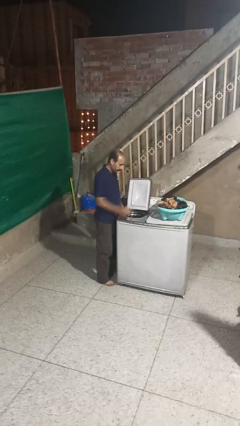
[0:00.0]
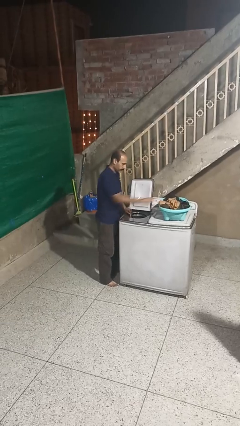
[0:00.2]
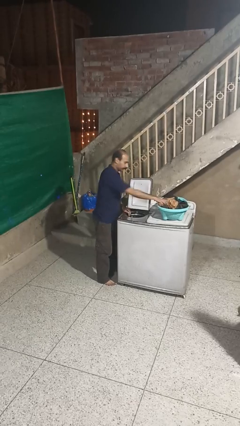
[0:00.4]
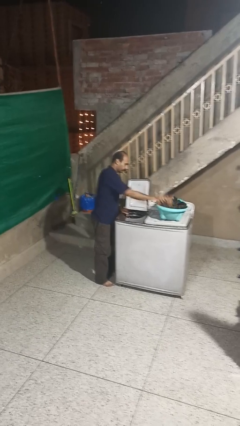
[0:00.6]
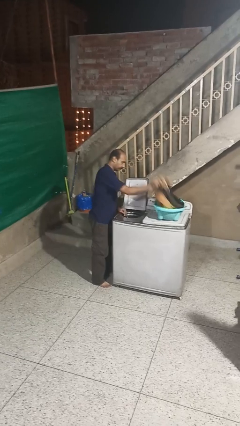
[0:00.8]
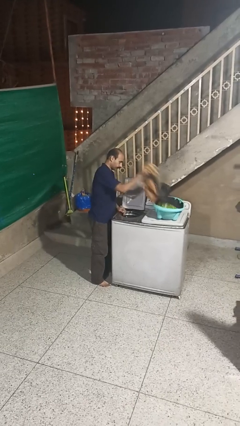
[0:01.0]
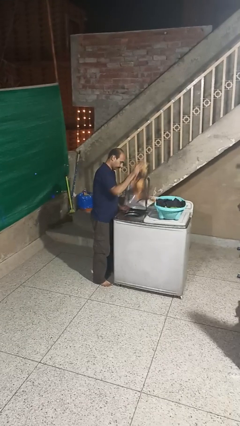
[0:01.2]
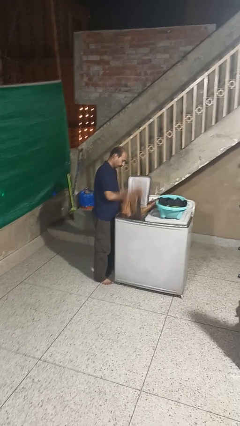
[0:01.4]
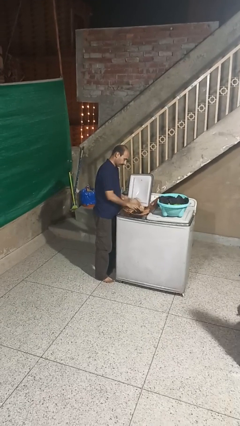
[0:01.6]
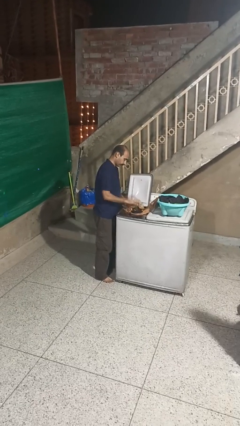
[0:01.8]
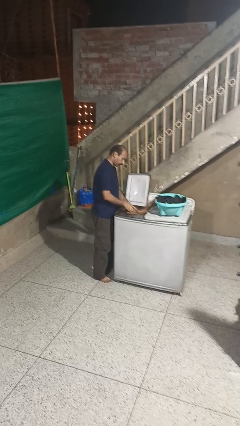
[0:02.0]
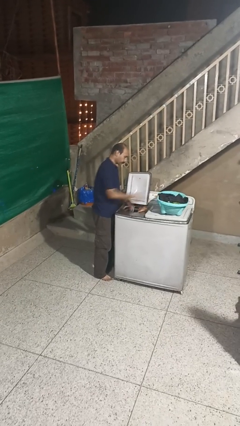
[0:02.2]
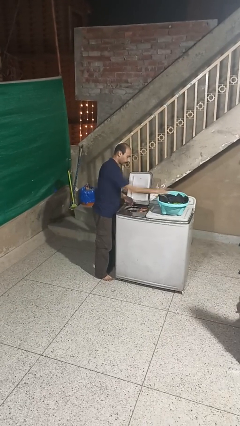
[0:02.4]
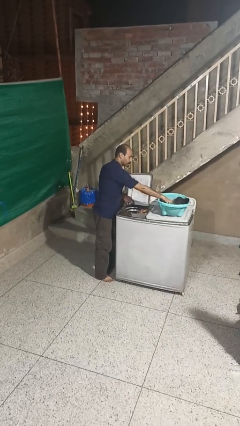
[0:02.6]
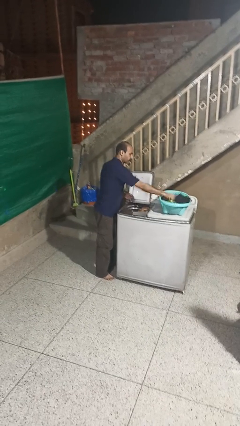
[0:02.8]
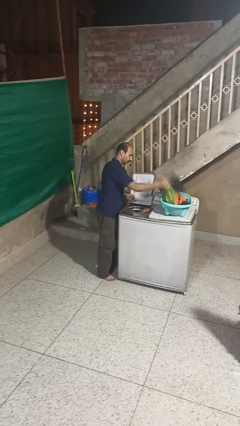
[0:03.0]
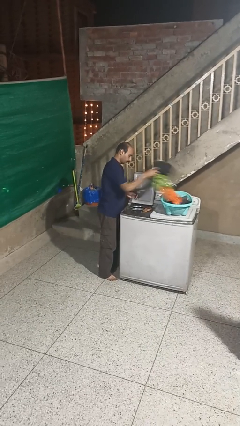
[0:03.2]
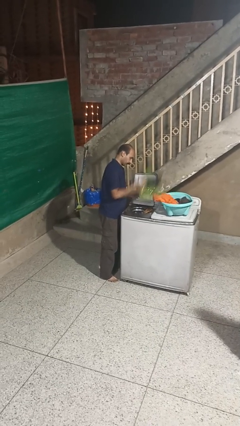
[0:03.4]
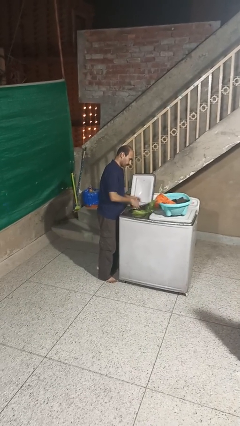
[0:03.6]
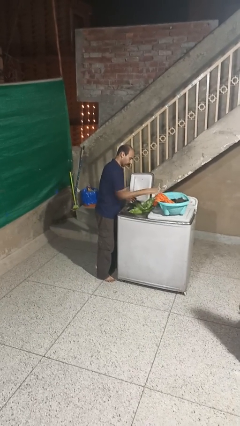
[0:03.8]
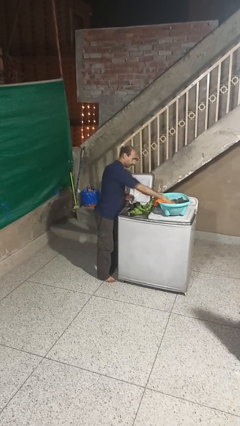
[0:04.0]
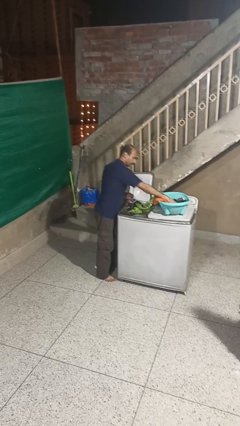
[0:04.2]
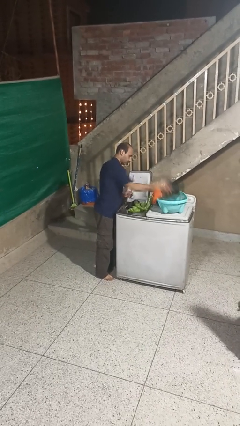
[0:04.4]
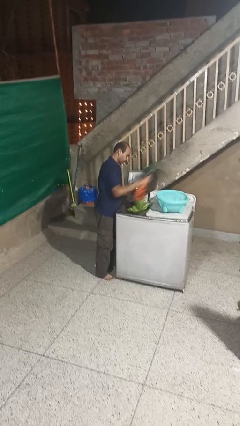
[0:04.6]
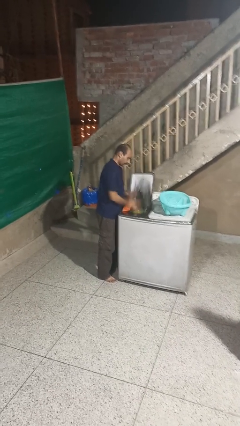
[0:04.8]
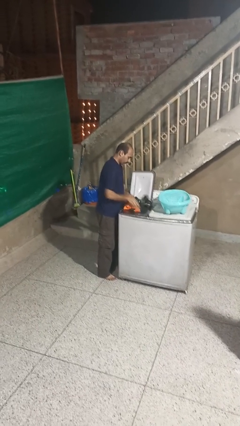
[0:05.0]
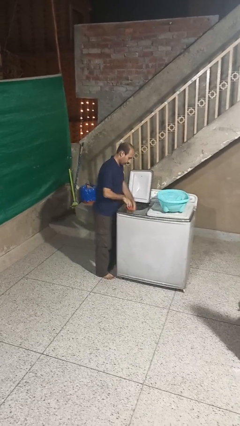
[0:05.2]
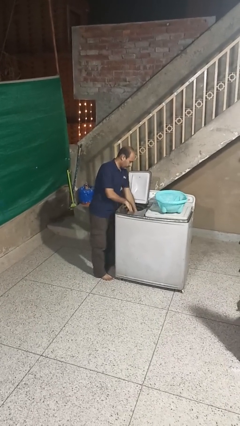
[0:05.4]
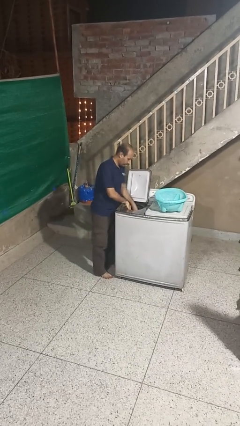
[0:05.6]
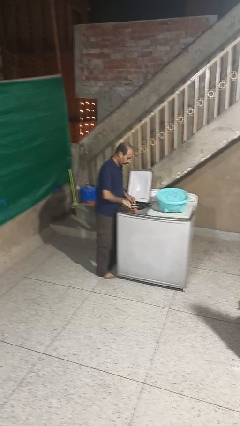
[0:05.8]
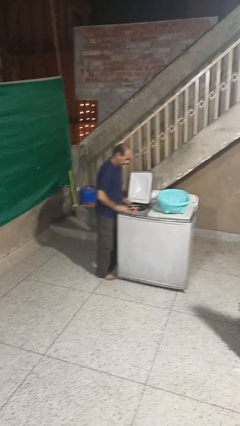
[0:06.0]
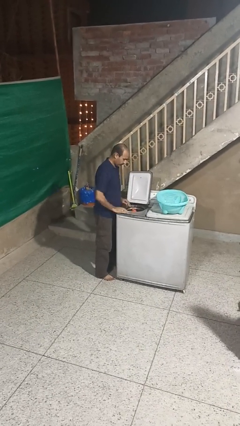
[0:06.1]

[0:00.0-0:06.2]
person loads dryer

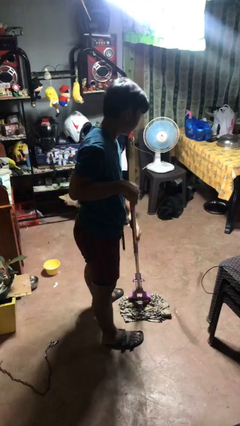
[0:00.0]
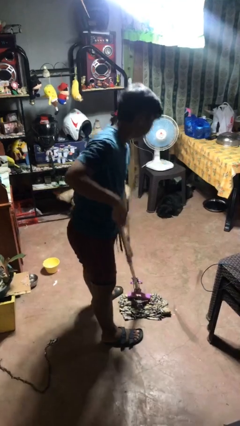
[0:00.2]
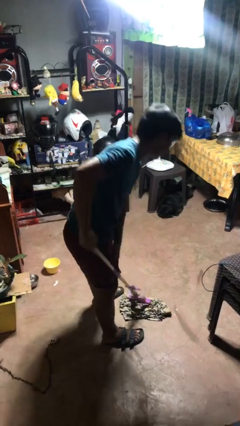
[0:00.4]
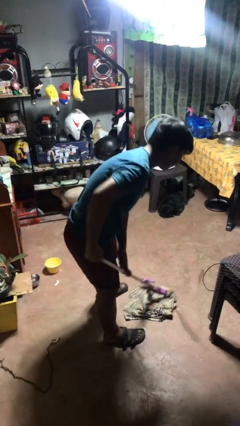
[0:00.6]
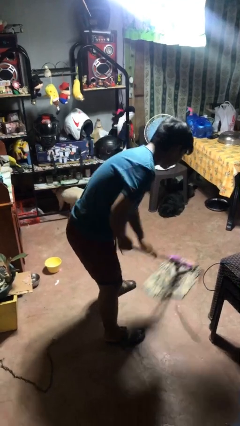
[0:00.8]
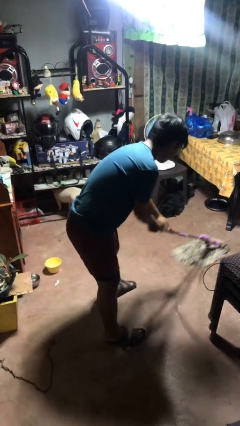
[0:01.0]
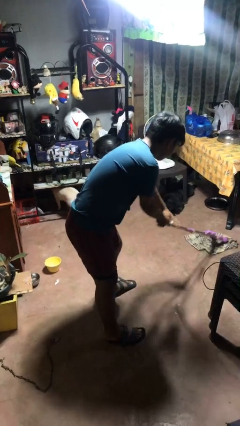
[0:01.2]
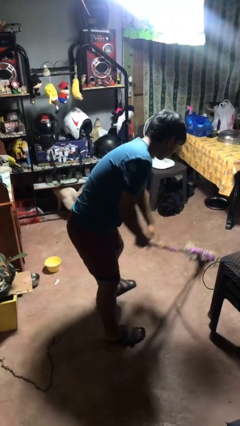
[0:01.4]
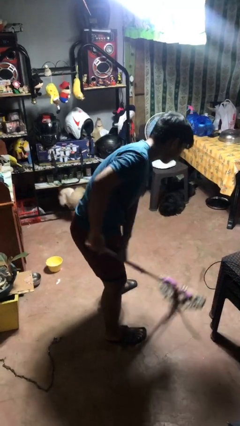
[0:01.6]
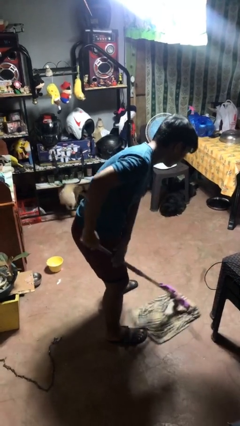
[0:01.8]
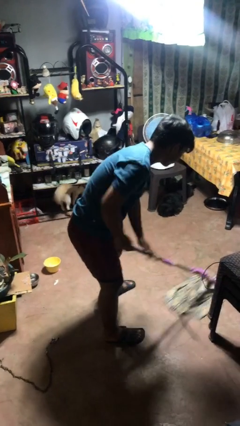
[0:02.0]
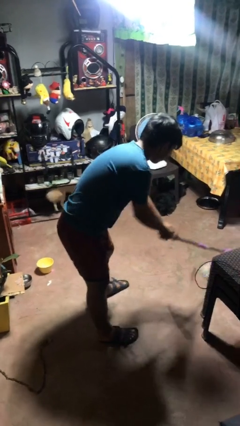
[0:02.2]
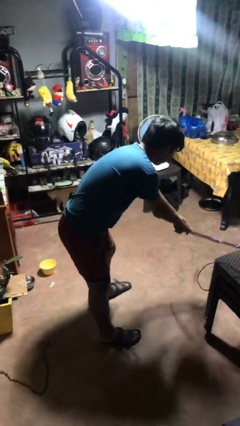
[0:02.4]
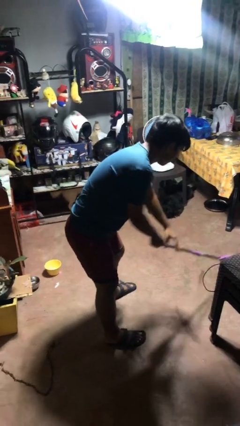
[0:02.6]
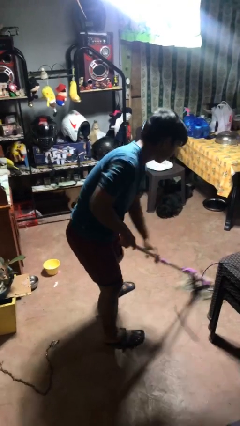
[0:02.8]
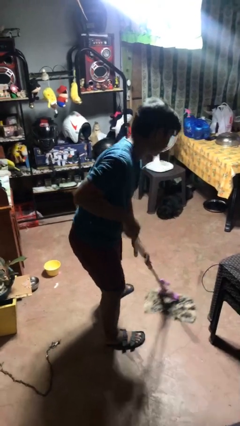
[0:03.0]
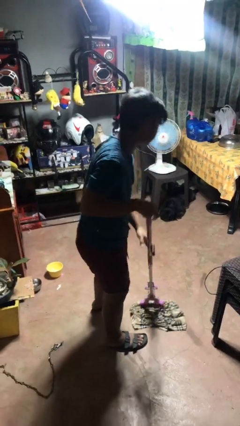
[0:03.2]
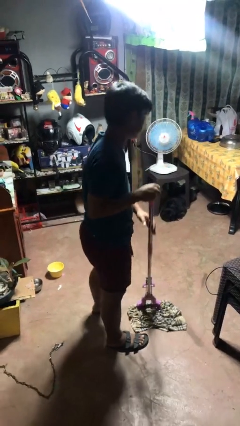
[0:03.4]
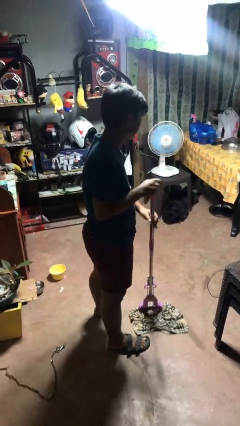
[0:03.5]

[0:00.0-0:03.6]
person mops

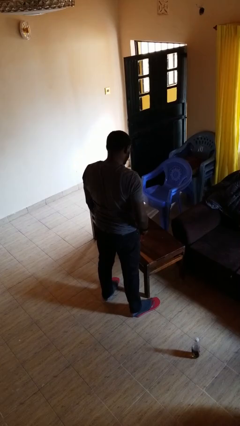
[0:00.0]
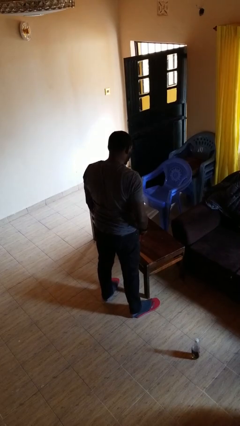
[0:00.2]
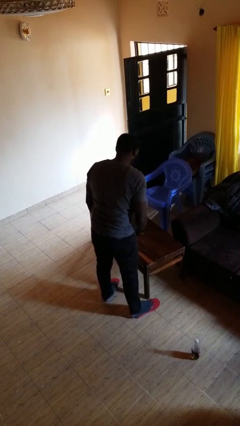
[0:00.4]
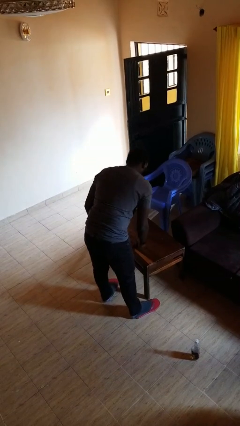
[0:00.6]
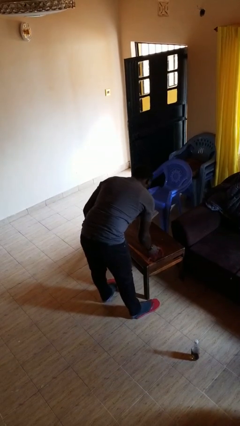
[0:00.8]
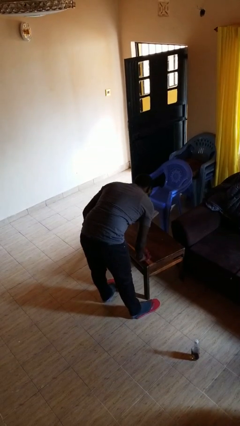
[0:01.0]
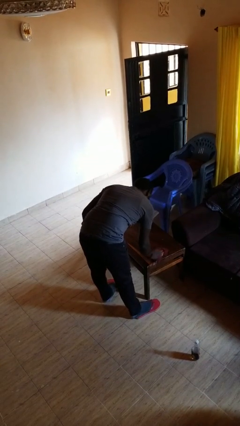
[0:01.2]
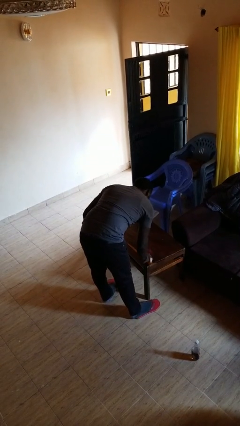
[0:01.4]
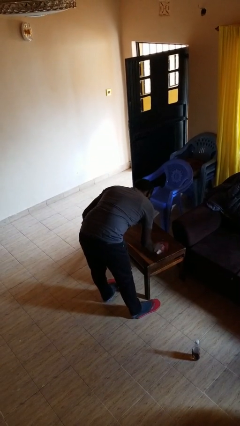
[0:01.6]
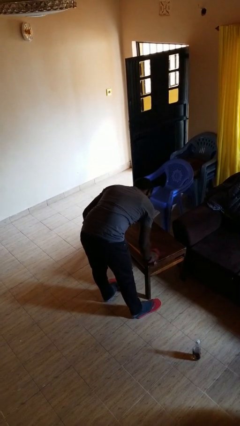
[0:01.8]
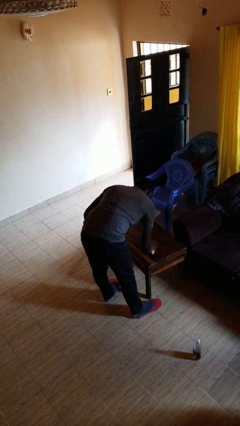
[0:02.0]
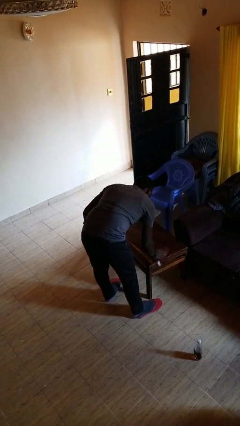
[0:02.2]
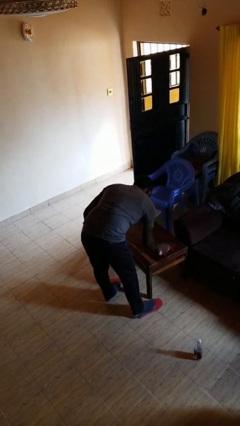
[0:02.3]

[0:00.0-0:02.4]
person cleans table with rag

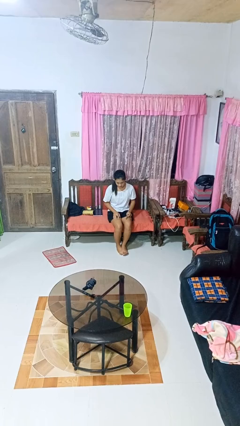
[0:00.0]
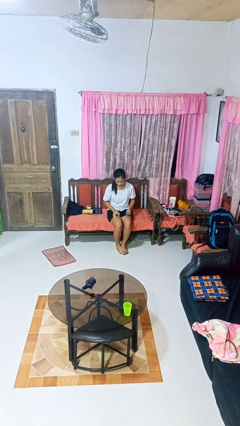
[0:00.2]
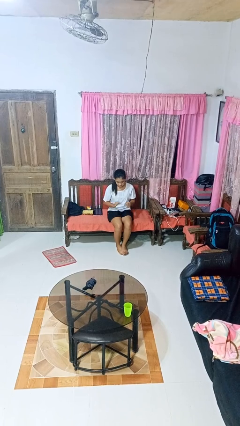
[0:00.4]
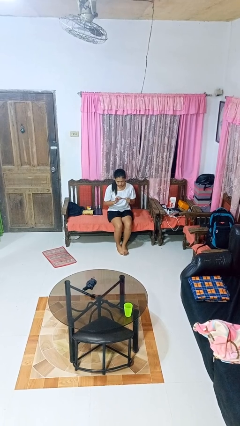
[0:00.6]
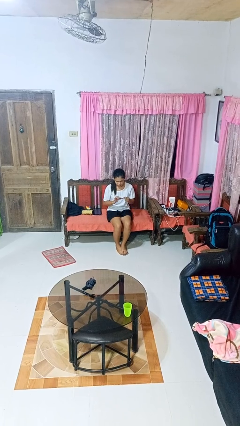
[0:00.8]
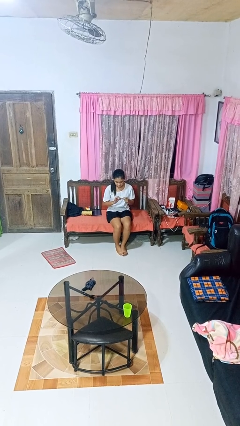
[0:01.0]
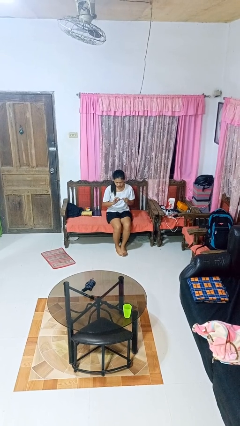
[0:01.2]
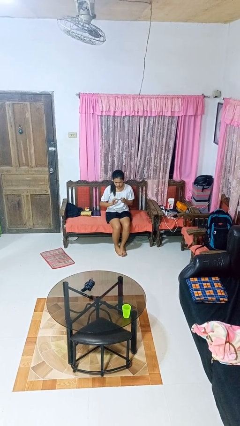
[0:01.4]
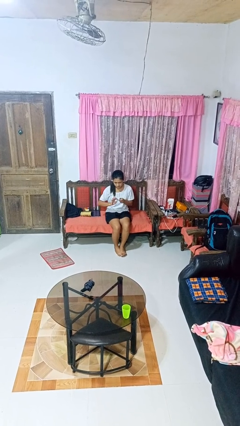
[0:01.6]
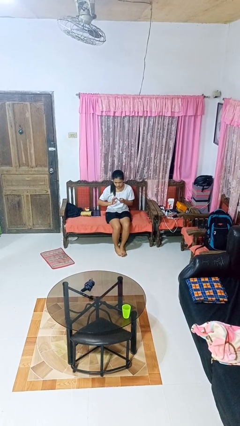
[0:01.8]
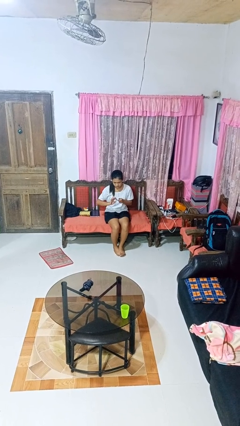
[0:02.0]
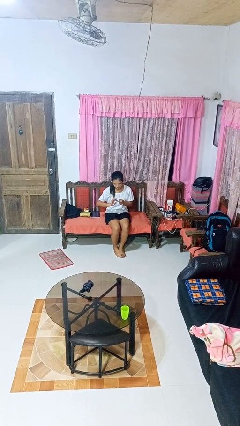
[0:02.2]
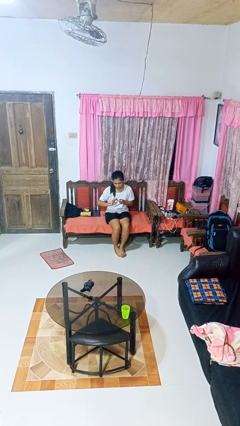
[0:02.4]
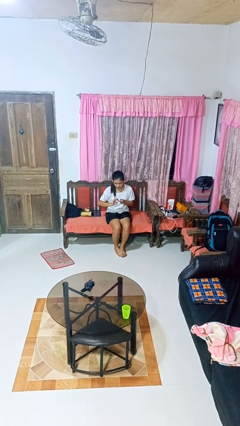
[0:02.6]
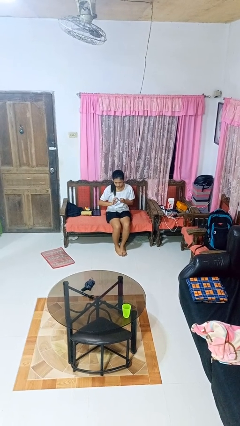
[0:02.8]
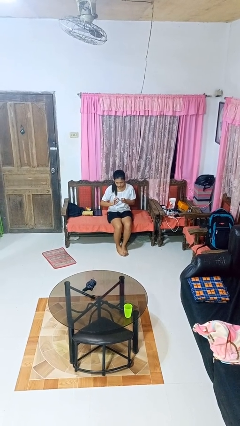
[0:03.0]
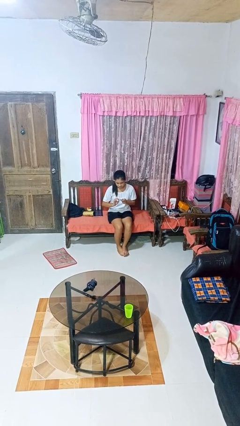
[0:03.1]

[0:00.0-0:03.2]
person files fingernails

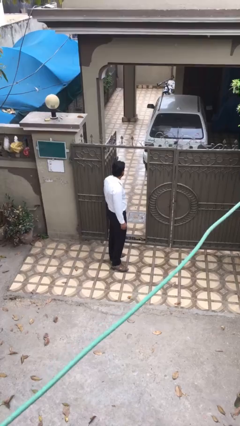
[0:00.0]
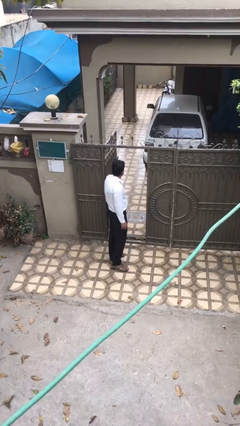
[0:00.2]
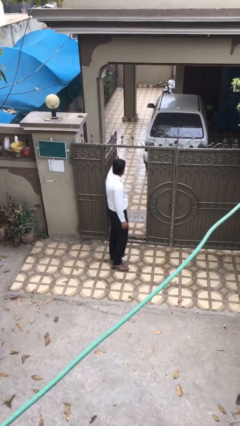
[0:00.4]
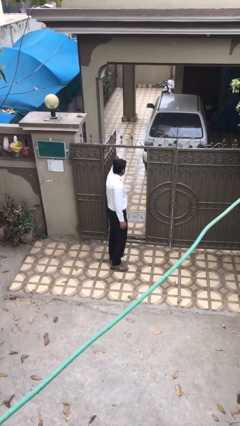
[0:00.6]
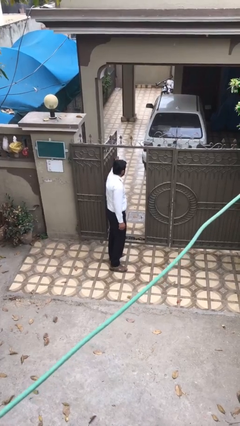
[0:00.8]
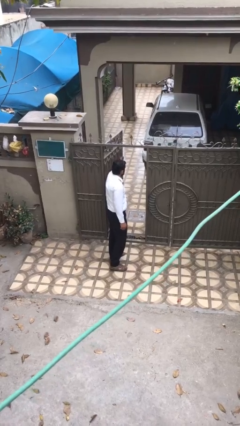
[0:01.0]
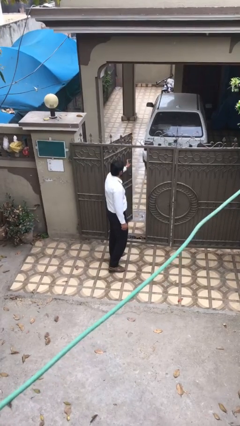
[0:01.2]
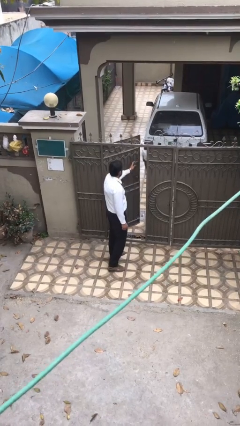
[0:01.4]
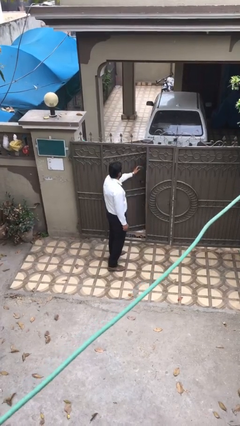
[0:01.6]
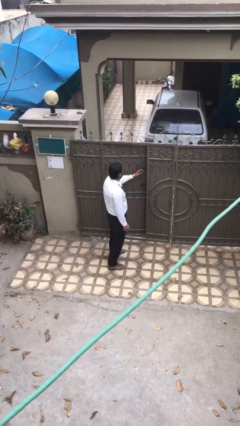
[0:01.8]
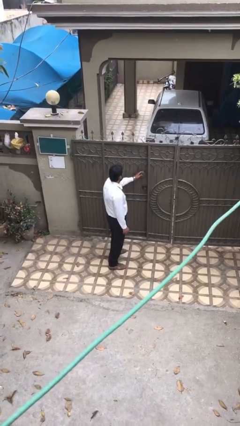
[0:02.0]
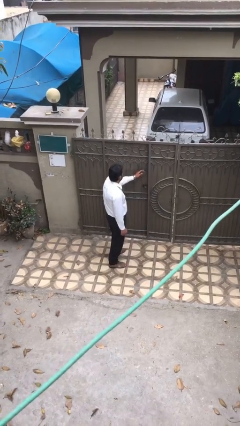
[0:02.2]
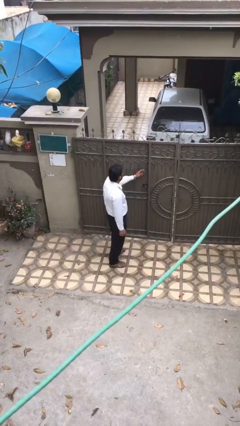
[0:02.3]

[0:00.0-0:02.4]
person closes facility door
